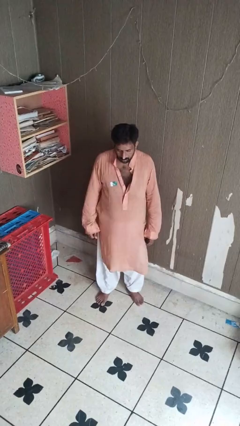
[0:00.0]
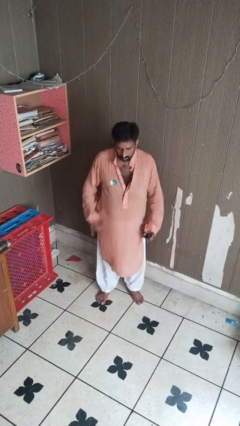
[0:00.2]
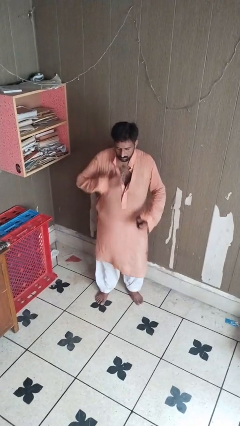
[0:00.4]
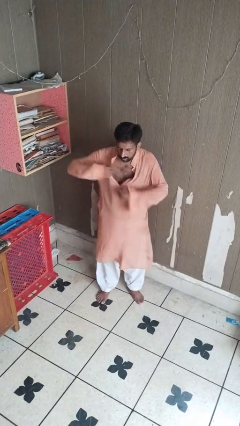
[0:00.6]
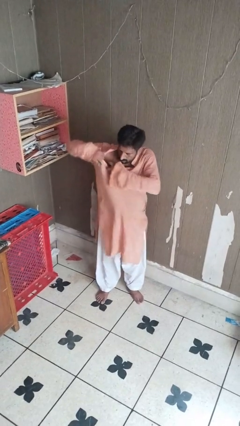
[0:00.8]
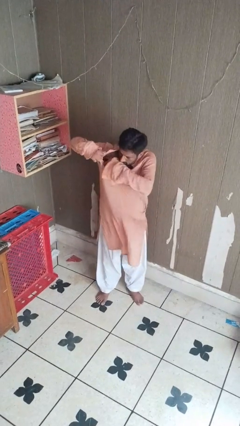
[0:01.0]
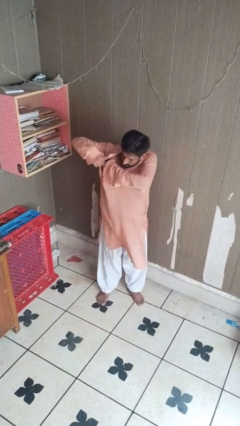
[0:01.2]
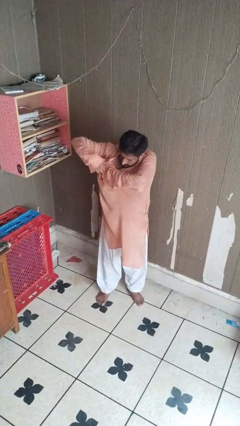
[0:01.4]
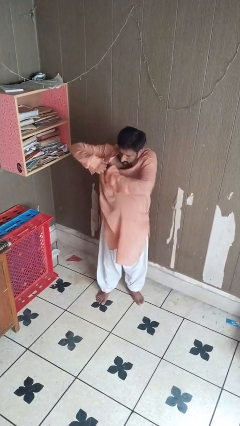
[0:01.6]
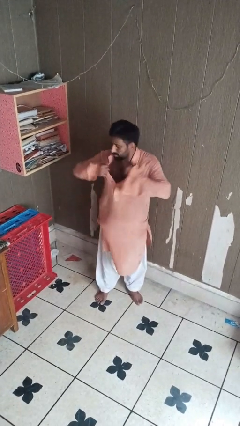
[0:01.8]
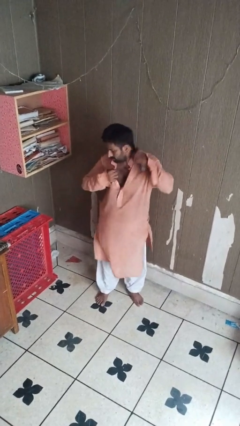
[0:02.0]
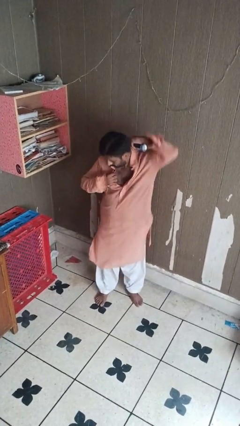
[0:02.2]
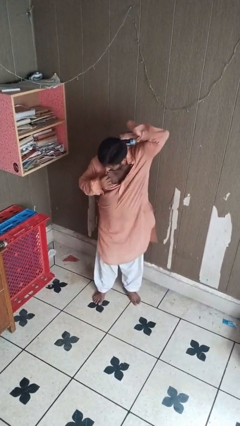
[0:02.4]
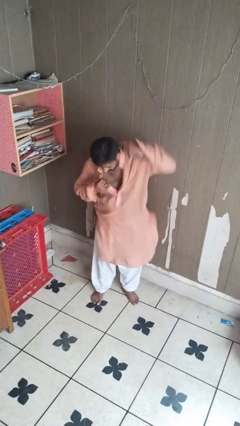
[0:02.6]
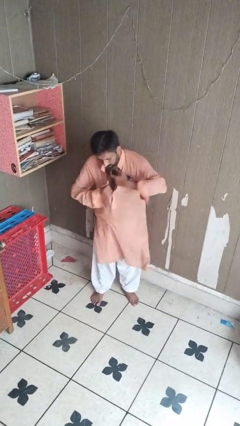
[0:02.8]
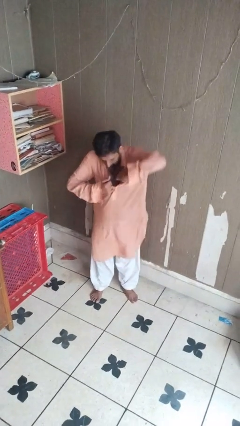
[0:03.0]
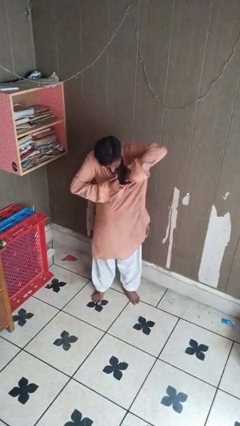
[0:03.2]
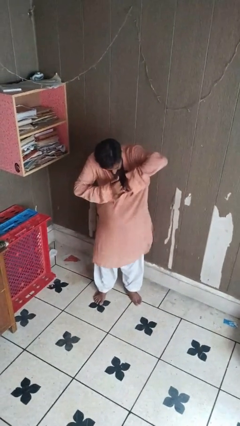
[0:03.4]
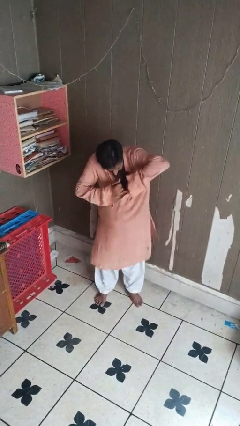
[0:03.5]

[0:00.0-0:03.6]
person applies deodorant

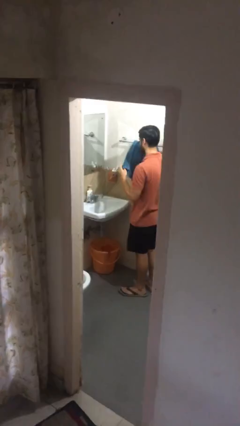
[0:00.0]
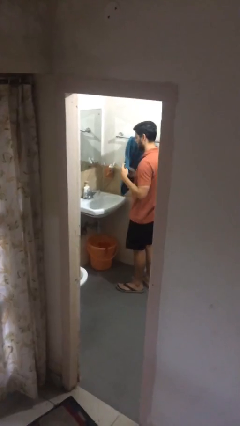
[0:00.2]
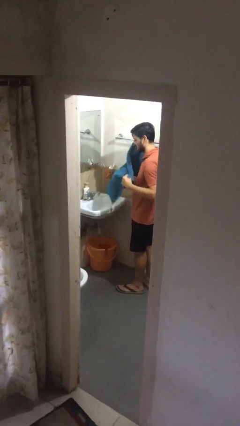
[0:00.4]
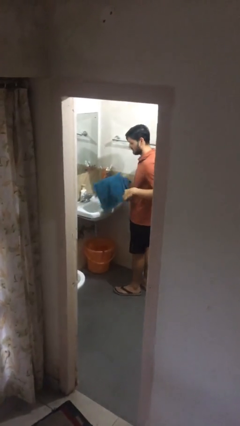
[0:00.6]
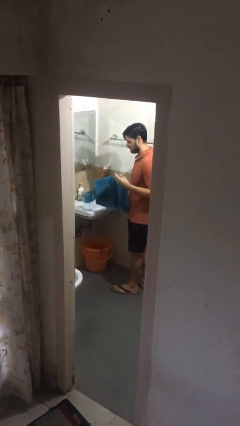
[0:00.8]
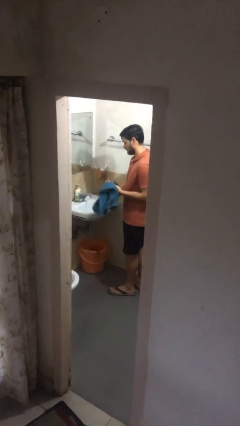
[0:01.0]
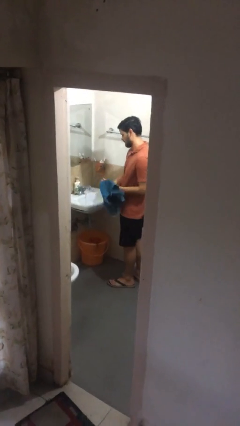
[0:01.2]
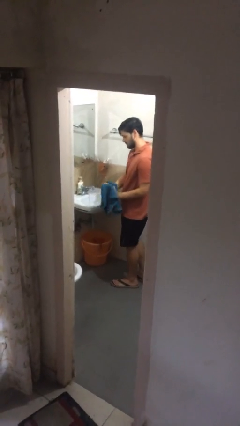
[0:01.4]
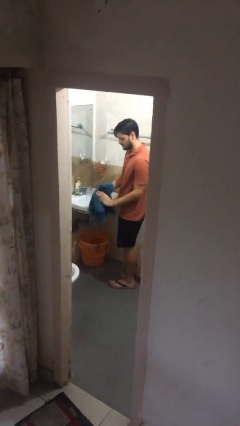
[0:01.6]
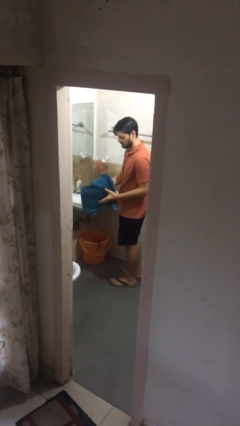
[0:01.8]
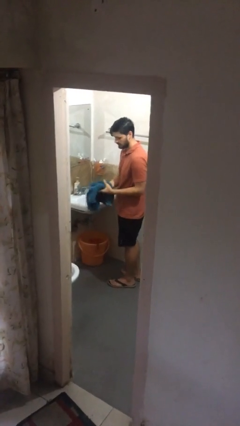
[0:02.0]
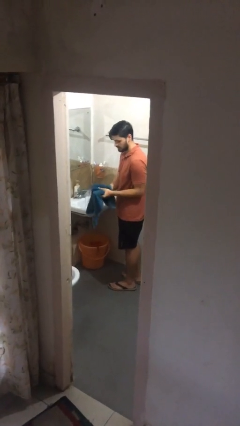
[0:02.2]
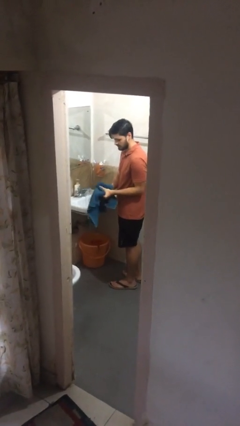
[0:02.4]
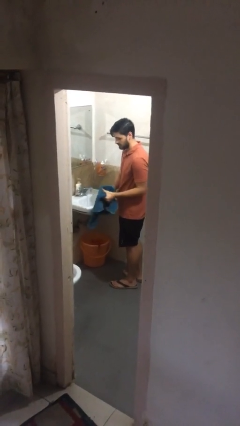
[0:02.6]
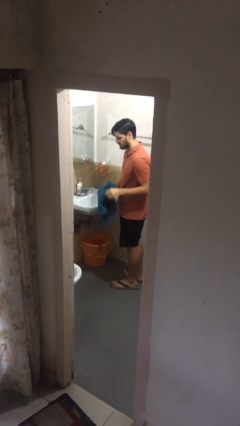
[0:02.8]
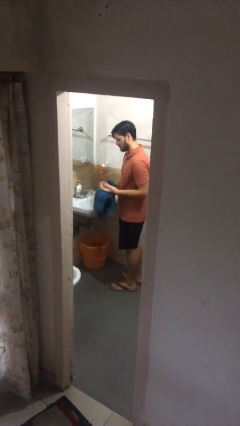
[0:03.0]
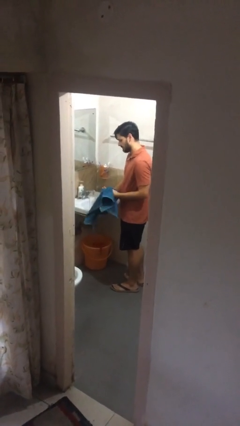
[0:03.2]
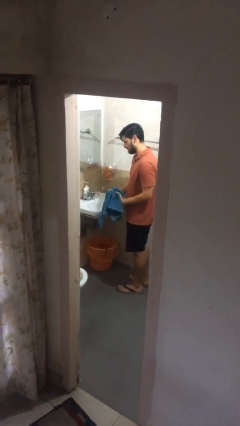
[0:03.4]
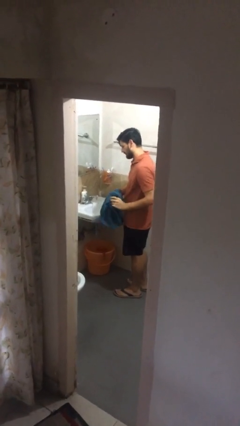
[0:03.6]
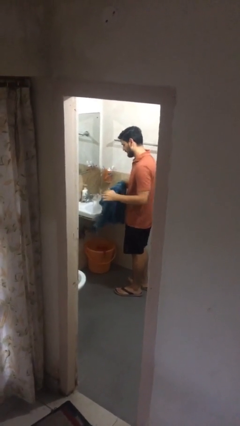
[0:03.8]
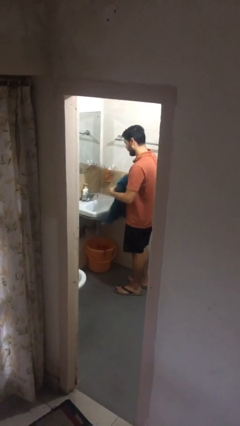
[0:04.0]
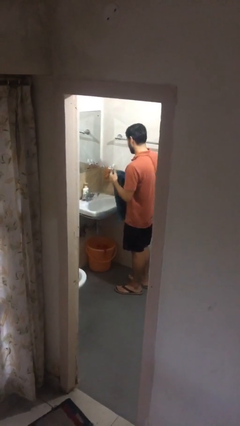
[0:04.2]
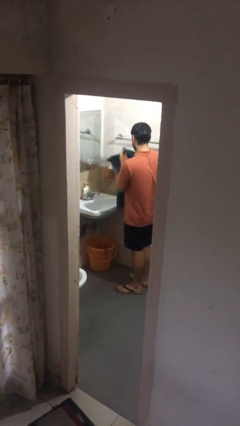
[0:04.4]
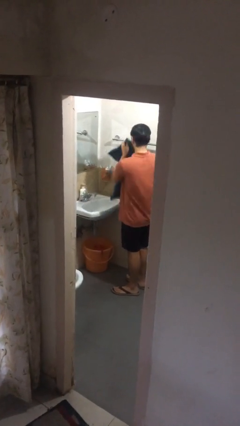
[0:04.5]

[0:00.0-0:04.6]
person dries hands with towel

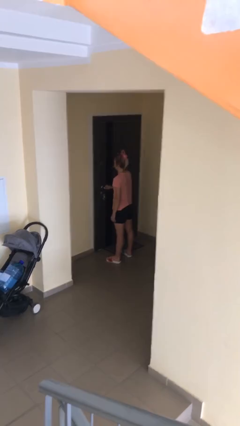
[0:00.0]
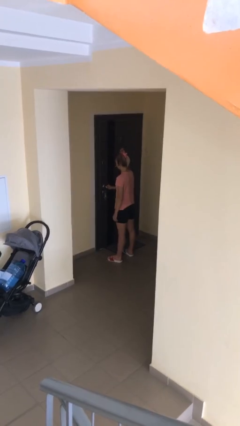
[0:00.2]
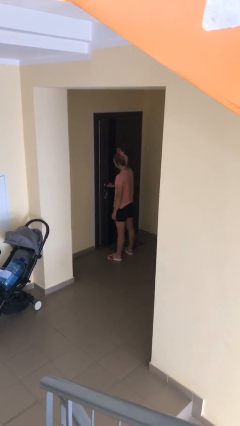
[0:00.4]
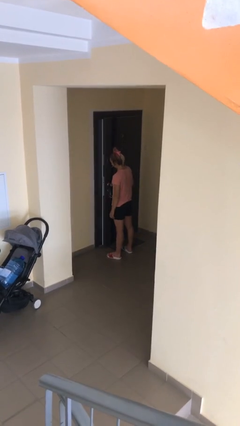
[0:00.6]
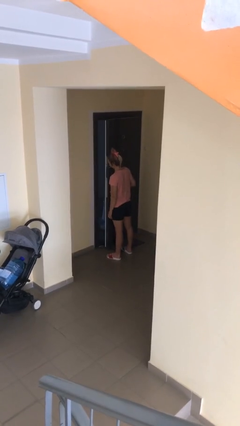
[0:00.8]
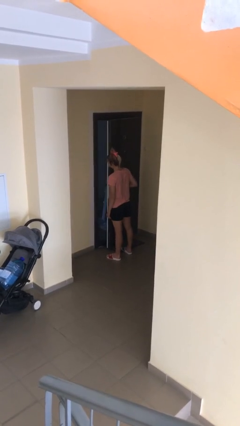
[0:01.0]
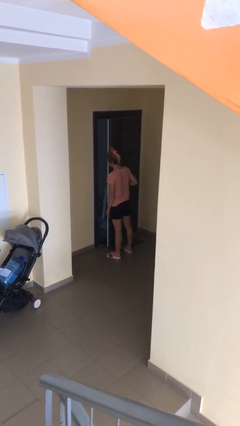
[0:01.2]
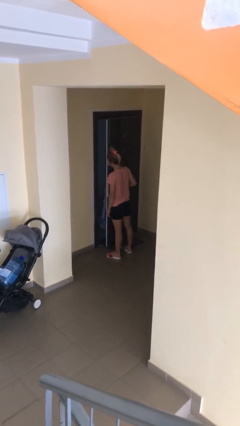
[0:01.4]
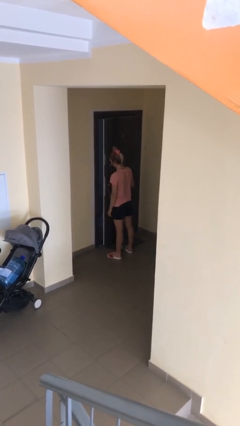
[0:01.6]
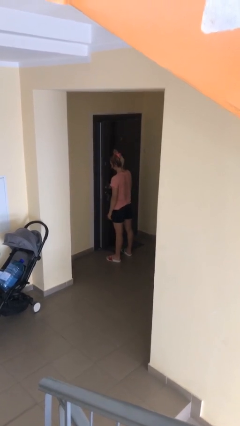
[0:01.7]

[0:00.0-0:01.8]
person opens facility door

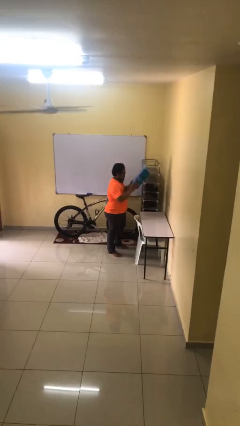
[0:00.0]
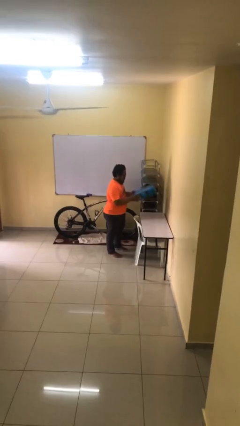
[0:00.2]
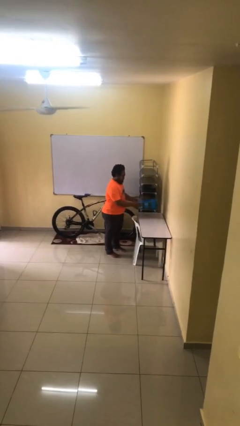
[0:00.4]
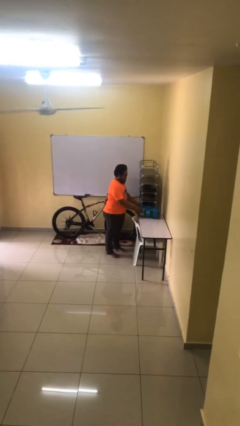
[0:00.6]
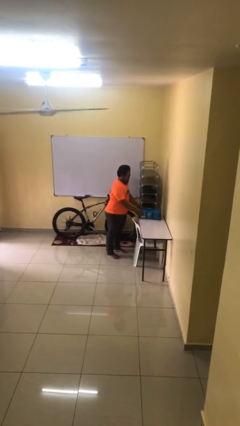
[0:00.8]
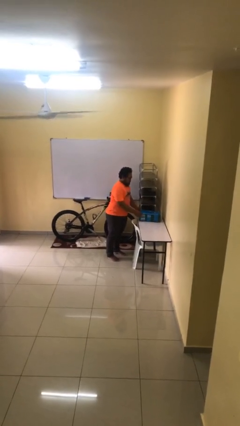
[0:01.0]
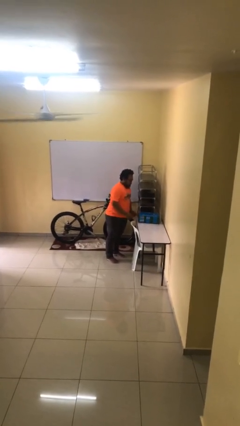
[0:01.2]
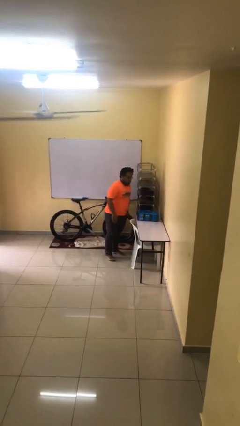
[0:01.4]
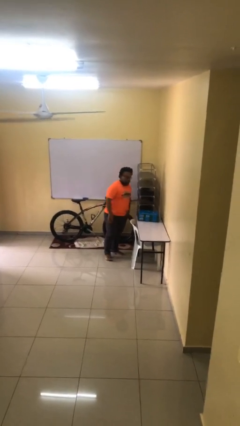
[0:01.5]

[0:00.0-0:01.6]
person puts down object on table

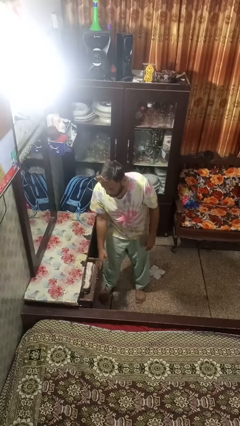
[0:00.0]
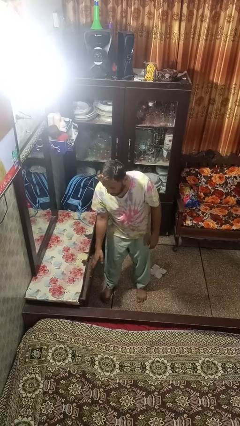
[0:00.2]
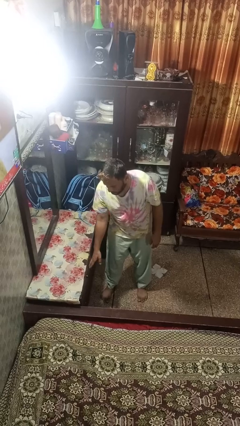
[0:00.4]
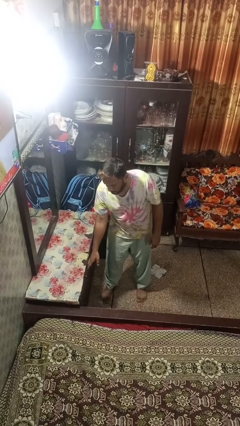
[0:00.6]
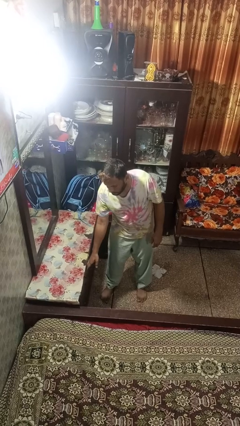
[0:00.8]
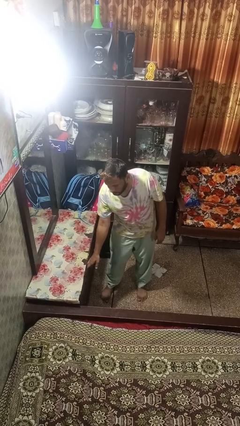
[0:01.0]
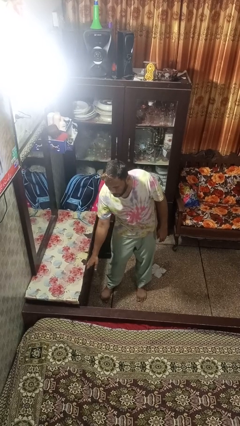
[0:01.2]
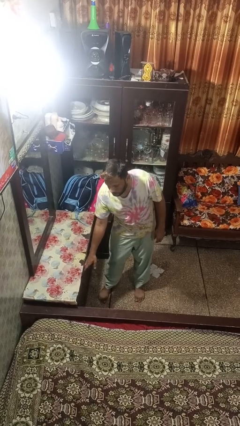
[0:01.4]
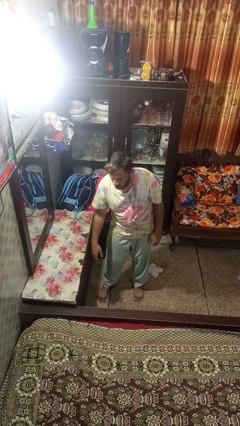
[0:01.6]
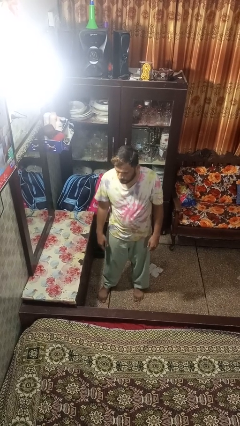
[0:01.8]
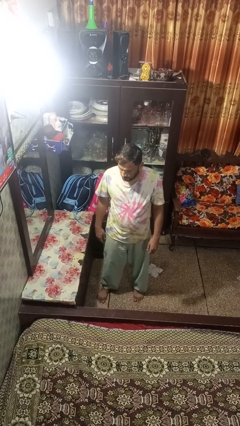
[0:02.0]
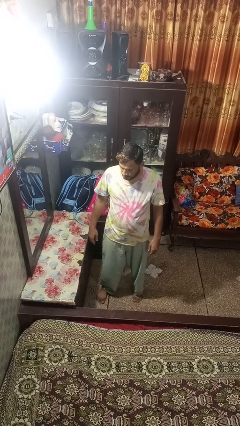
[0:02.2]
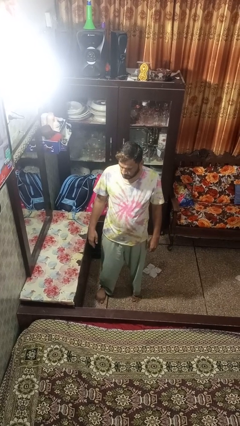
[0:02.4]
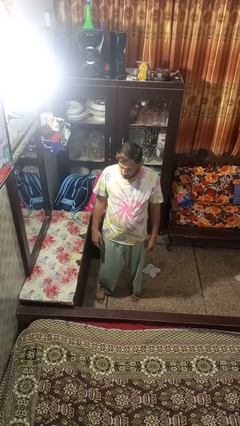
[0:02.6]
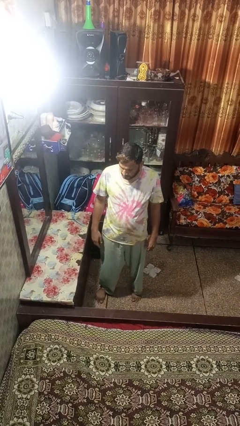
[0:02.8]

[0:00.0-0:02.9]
person closes dresser drawer

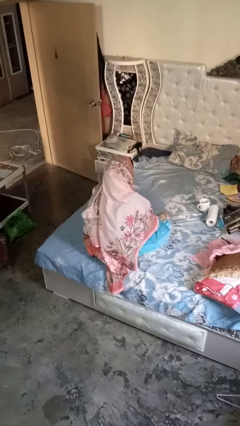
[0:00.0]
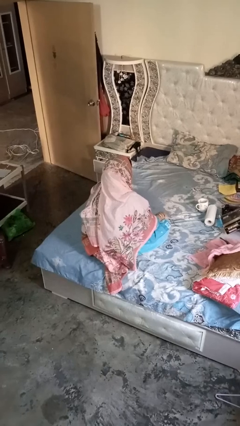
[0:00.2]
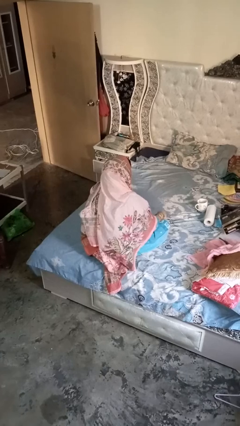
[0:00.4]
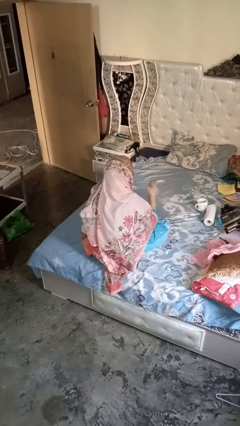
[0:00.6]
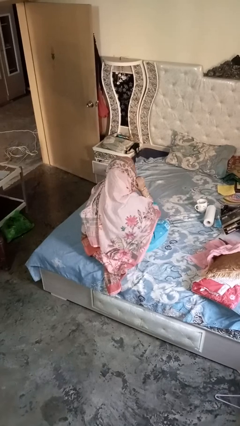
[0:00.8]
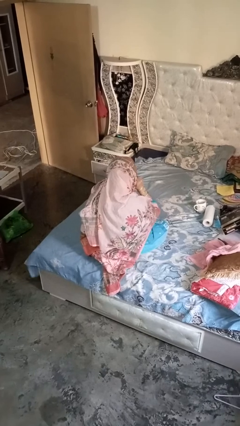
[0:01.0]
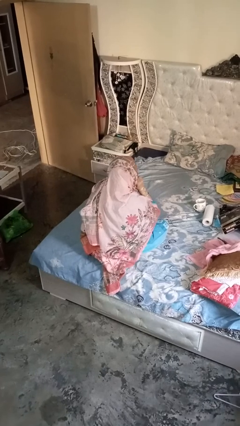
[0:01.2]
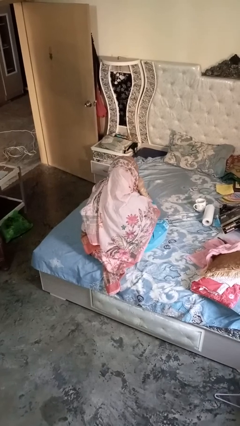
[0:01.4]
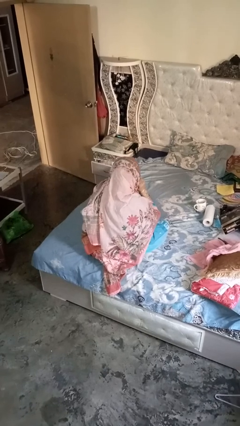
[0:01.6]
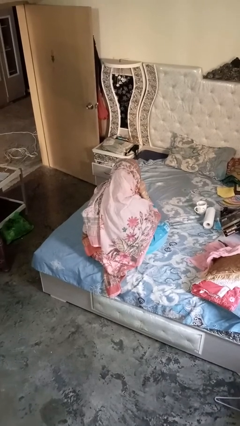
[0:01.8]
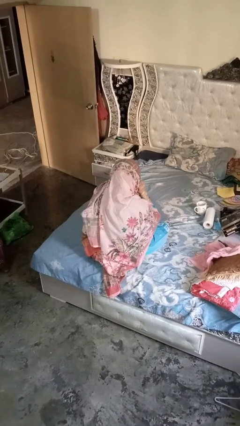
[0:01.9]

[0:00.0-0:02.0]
person gestures listen closely

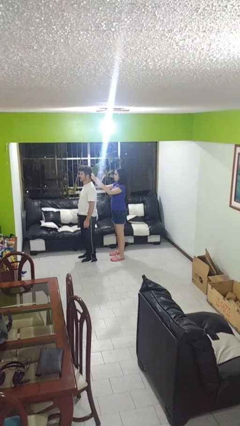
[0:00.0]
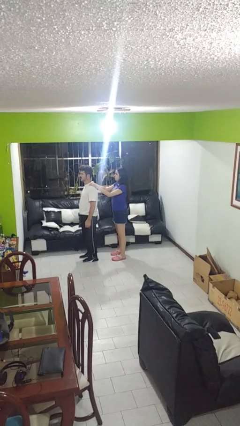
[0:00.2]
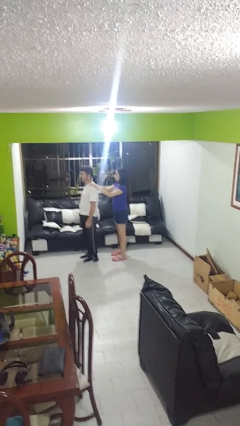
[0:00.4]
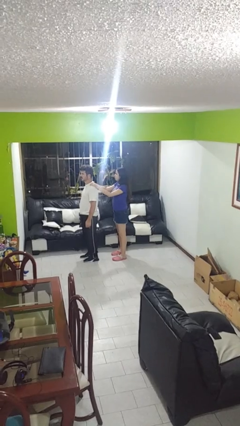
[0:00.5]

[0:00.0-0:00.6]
person grabs person by shoulder

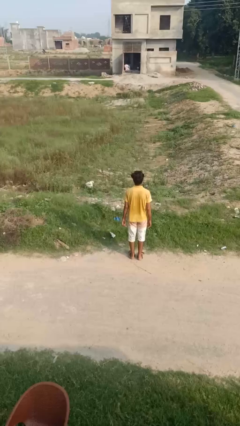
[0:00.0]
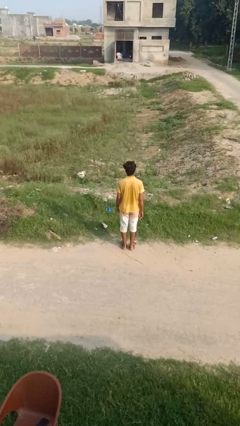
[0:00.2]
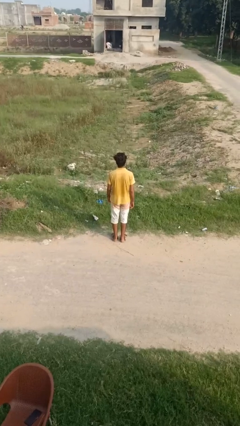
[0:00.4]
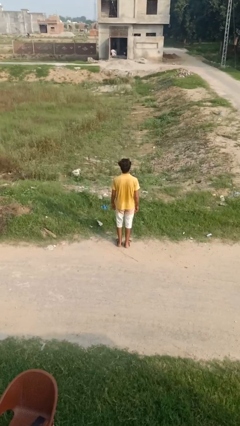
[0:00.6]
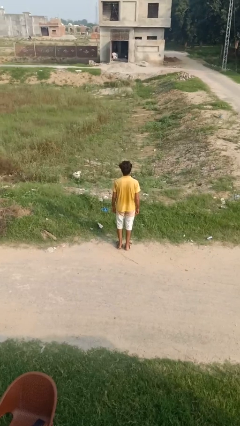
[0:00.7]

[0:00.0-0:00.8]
person prays
